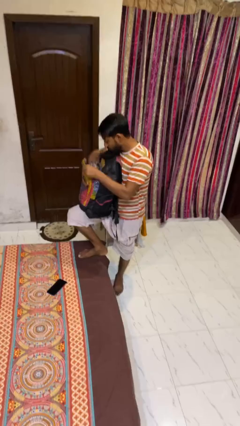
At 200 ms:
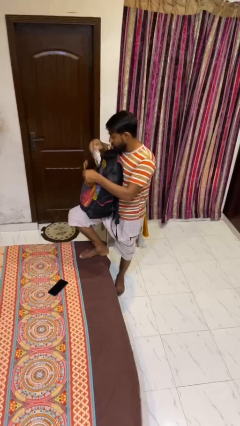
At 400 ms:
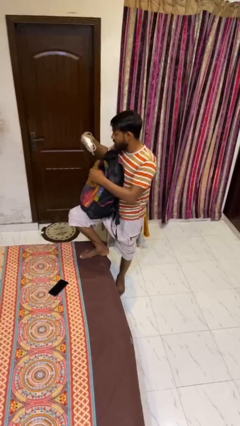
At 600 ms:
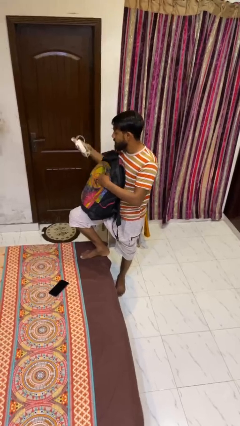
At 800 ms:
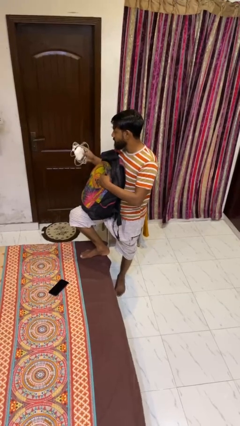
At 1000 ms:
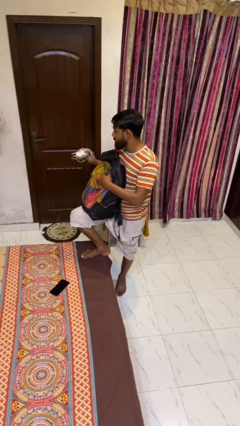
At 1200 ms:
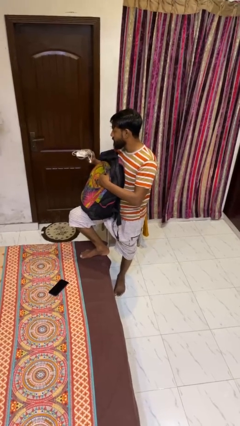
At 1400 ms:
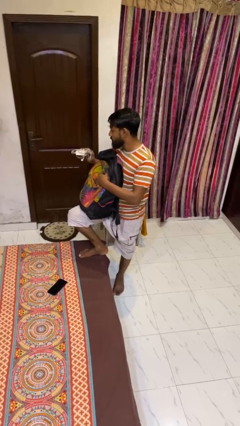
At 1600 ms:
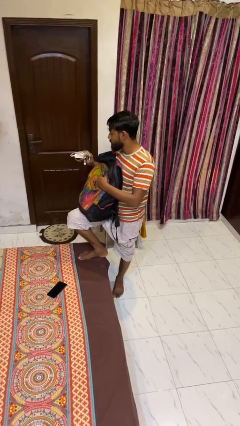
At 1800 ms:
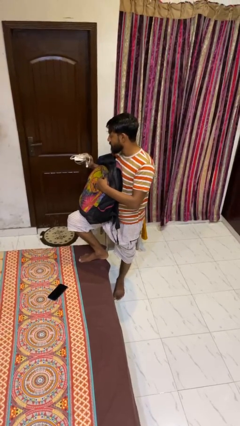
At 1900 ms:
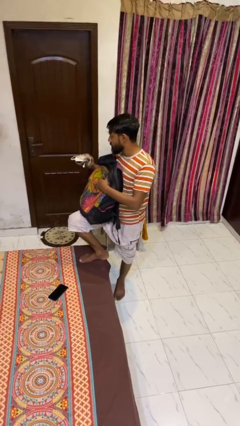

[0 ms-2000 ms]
person takes object from backpack

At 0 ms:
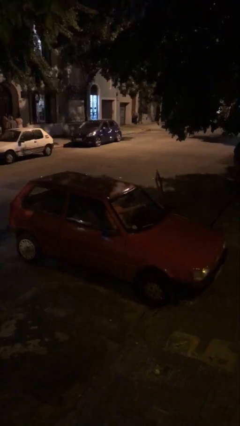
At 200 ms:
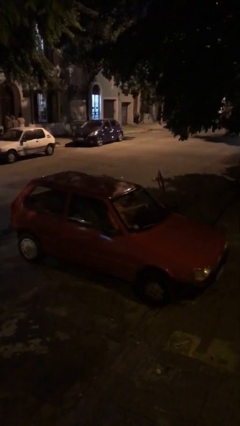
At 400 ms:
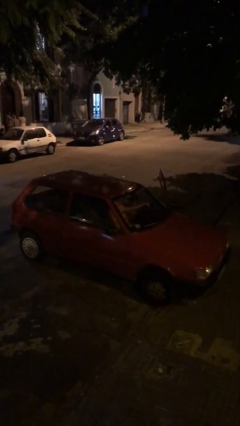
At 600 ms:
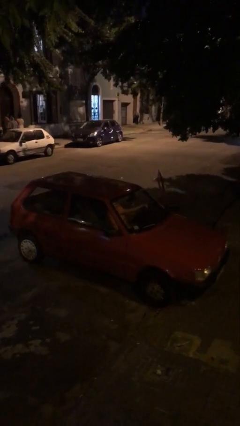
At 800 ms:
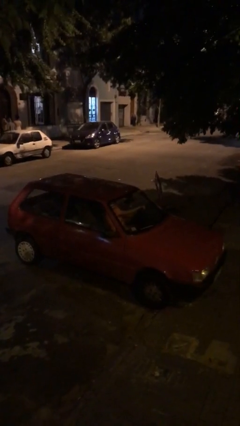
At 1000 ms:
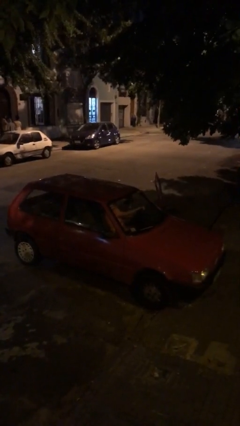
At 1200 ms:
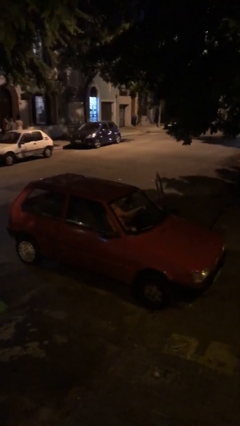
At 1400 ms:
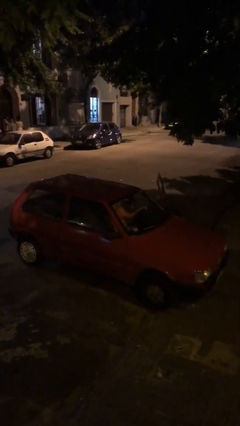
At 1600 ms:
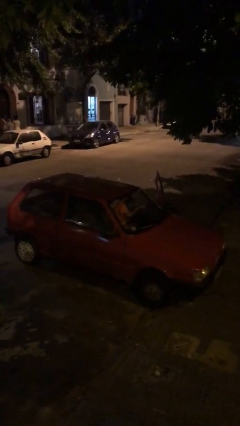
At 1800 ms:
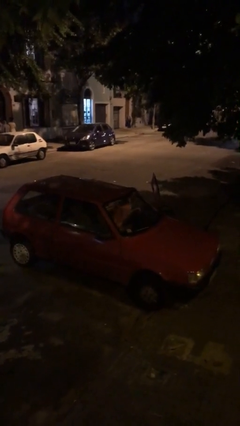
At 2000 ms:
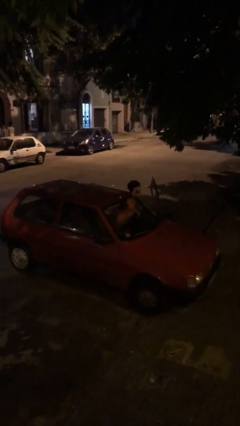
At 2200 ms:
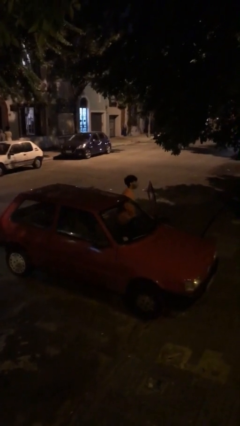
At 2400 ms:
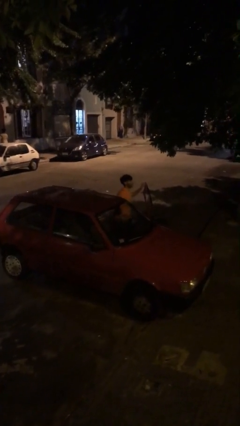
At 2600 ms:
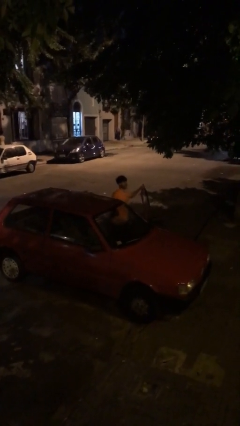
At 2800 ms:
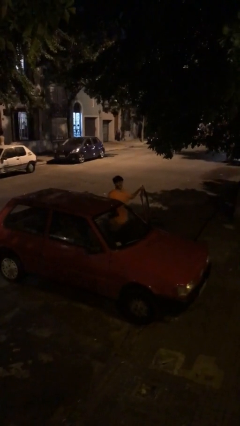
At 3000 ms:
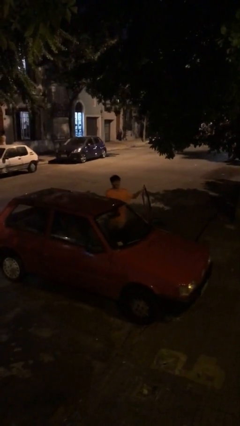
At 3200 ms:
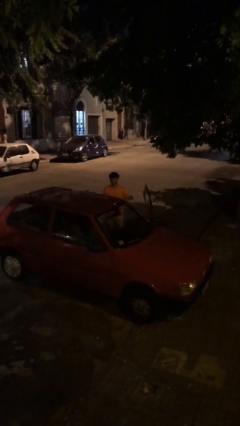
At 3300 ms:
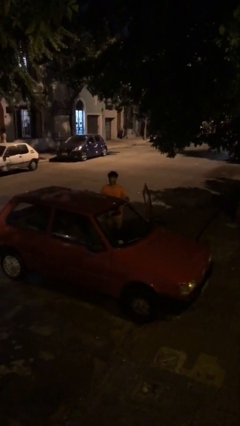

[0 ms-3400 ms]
person exits car

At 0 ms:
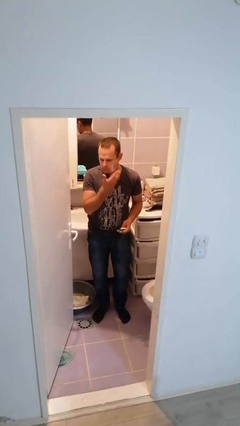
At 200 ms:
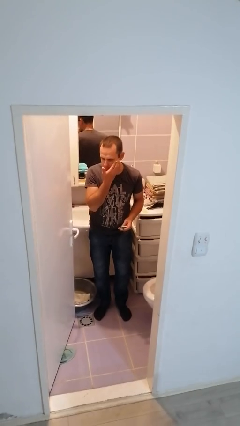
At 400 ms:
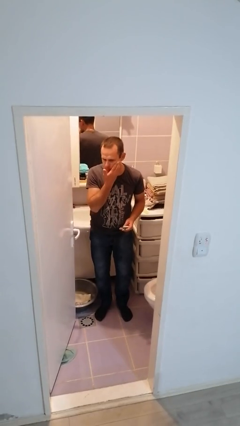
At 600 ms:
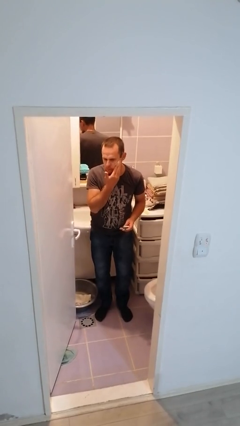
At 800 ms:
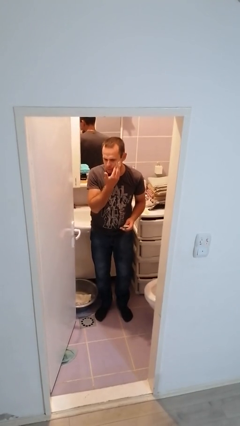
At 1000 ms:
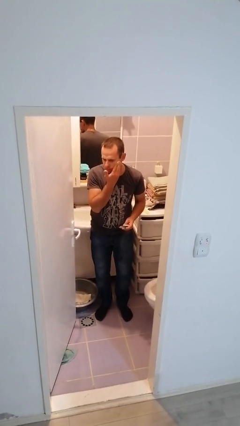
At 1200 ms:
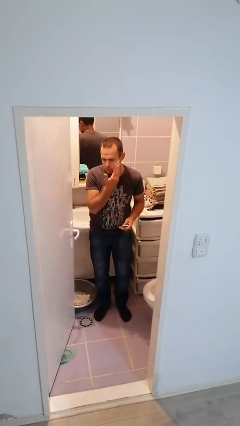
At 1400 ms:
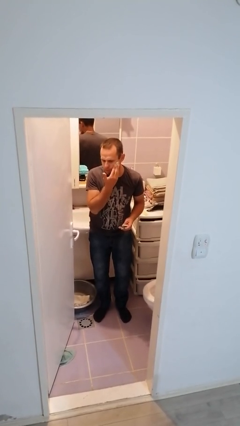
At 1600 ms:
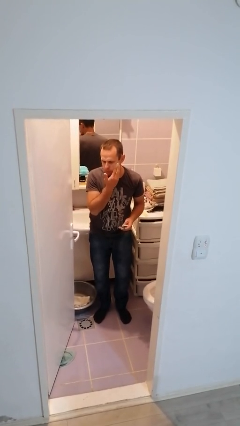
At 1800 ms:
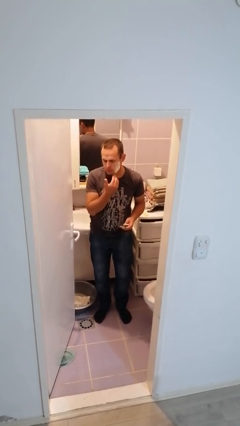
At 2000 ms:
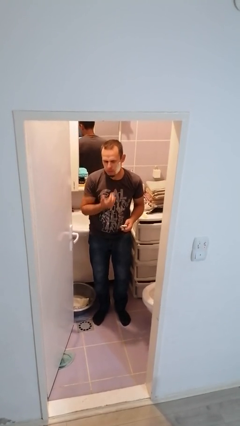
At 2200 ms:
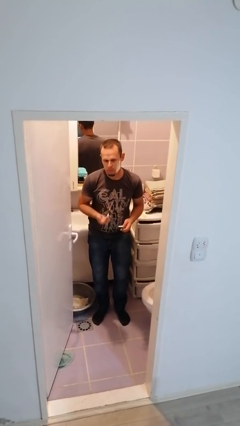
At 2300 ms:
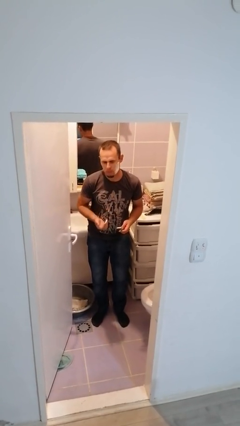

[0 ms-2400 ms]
person applies shaving cream

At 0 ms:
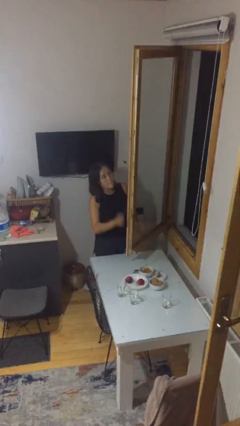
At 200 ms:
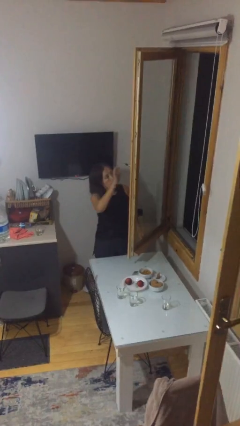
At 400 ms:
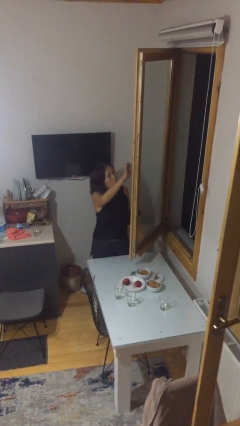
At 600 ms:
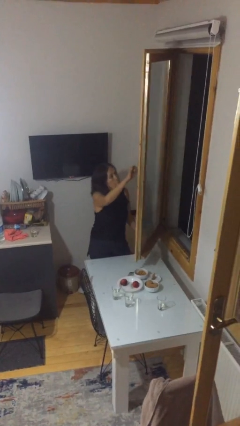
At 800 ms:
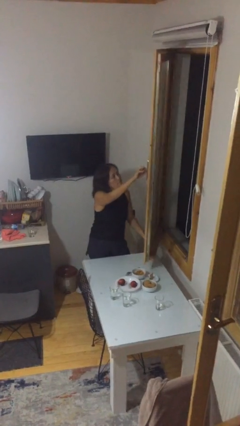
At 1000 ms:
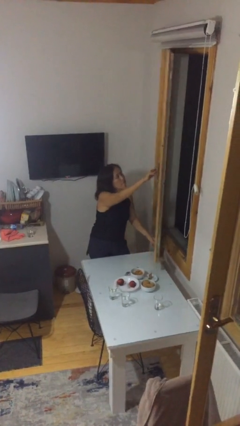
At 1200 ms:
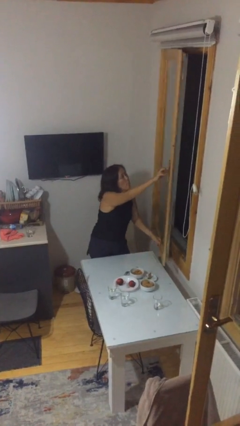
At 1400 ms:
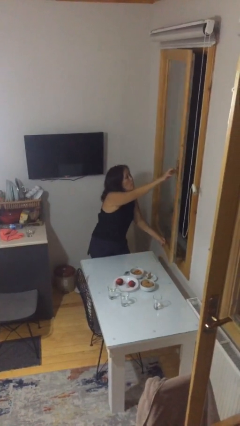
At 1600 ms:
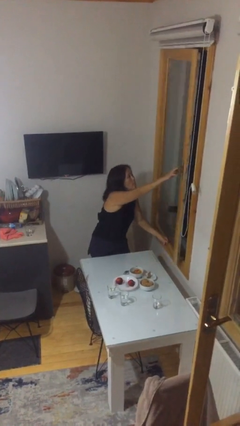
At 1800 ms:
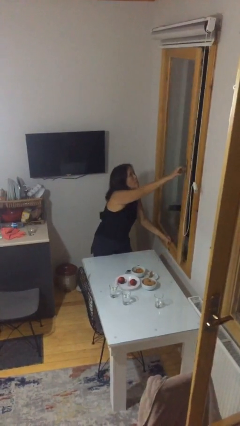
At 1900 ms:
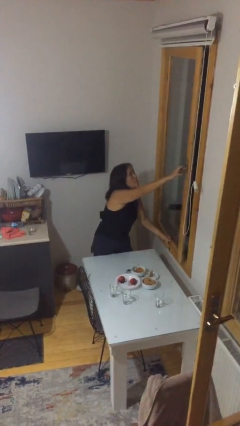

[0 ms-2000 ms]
person closes home window

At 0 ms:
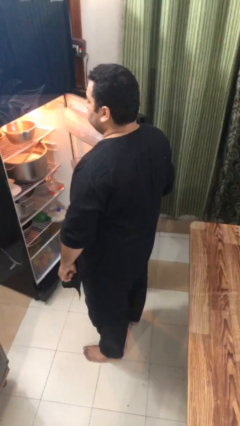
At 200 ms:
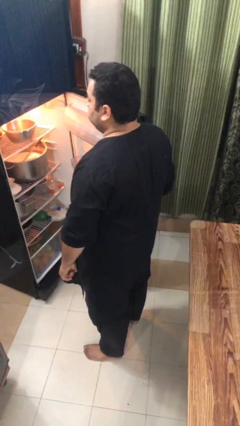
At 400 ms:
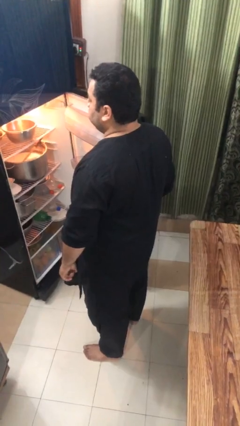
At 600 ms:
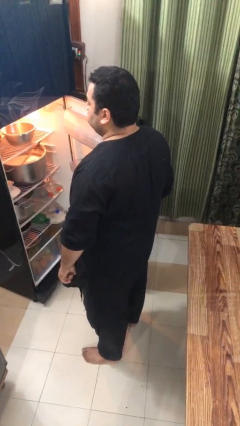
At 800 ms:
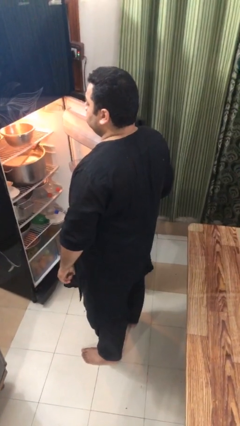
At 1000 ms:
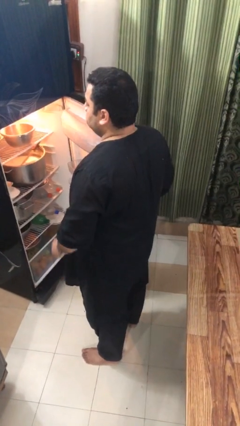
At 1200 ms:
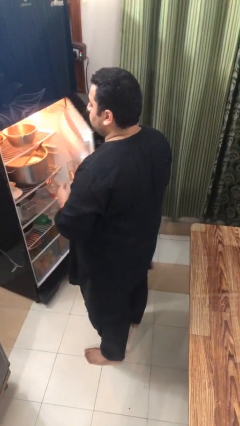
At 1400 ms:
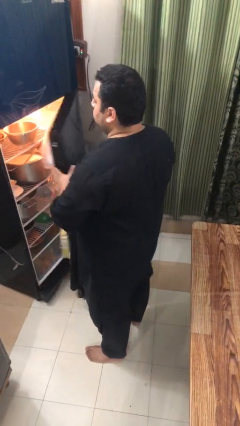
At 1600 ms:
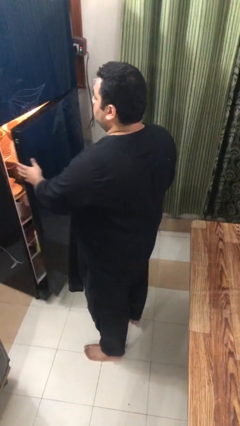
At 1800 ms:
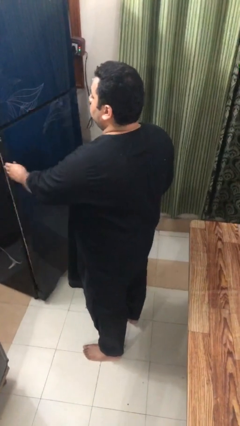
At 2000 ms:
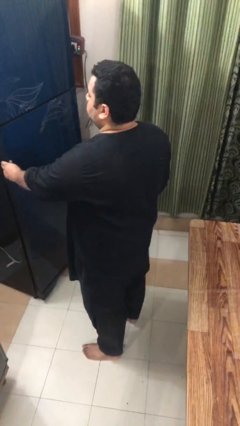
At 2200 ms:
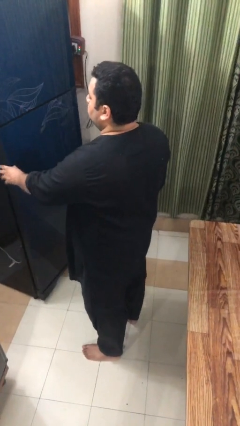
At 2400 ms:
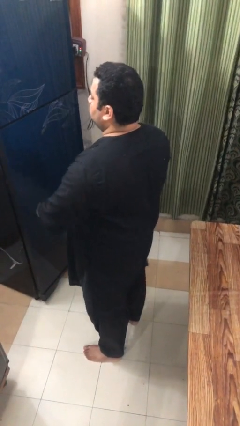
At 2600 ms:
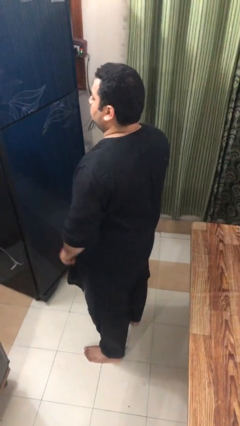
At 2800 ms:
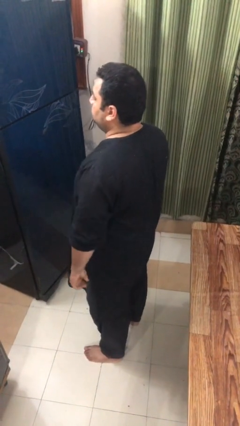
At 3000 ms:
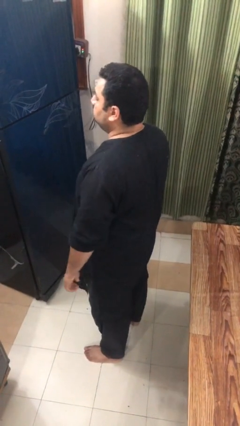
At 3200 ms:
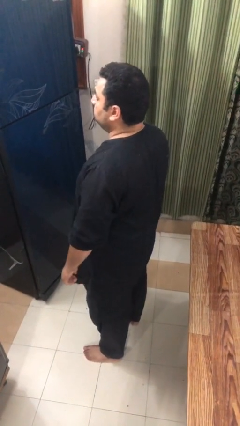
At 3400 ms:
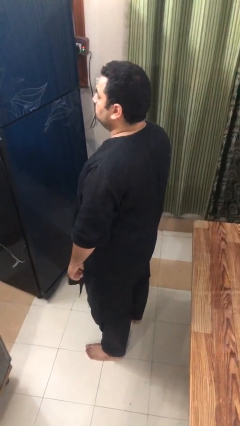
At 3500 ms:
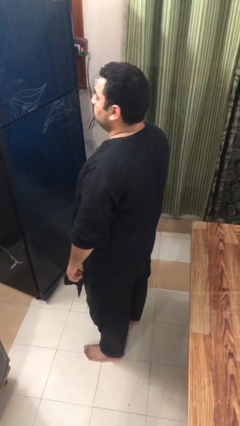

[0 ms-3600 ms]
person closes refrigerator

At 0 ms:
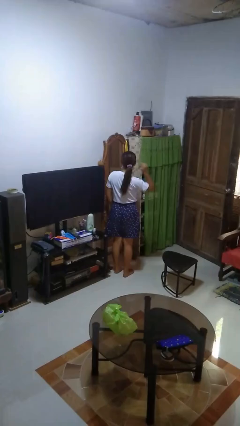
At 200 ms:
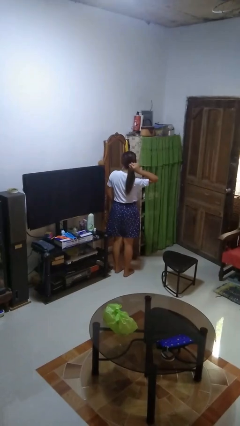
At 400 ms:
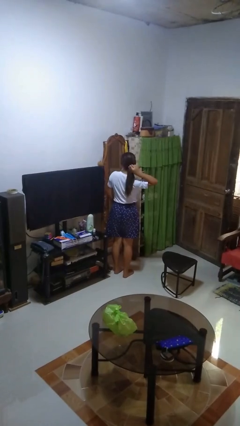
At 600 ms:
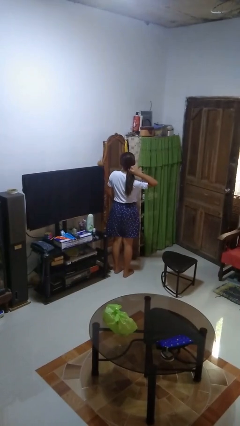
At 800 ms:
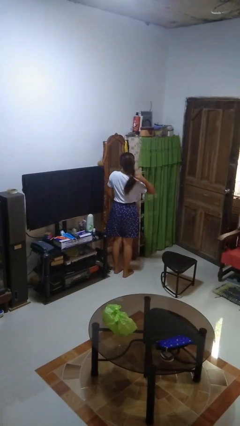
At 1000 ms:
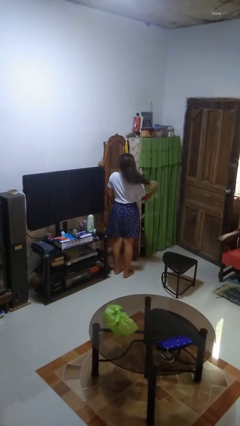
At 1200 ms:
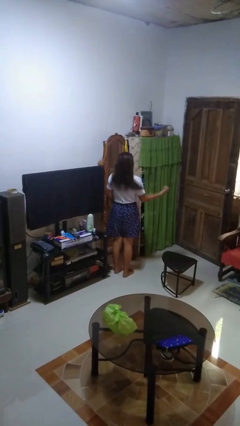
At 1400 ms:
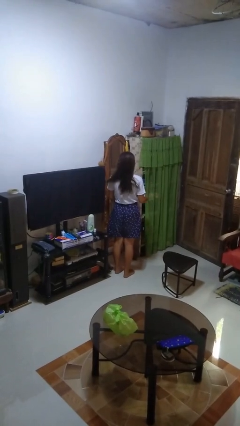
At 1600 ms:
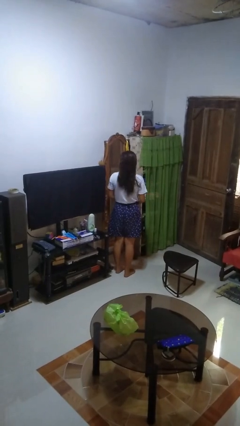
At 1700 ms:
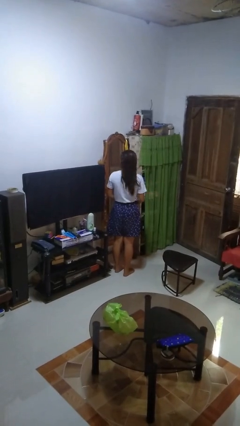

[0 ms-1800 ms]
person takes off hairtie

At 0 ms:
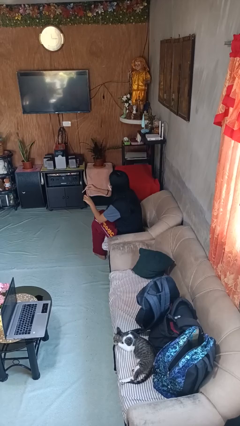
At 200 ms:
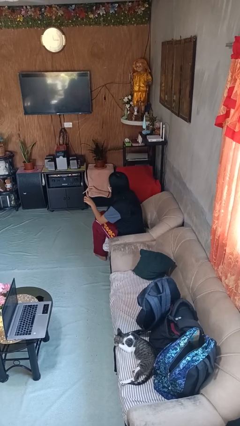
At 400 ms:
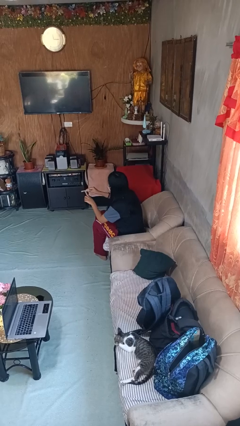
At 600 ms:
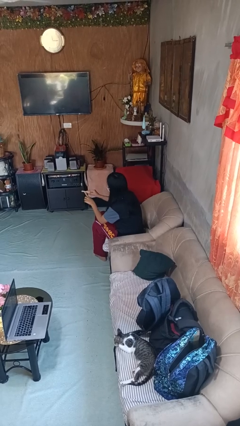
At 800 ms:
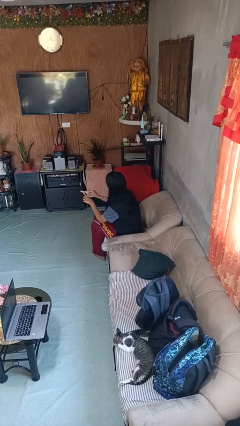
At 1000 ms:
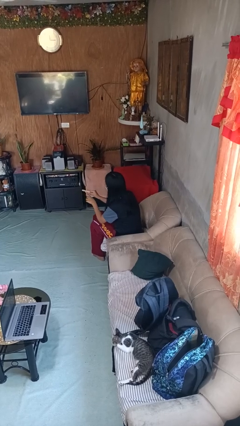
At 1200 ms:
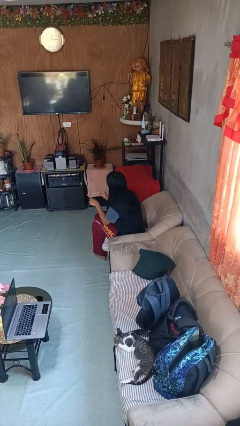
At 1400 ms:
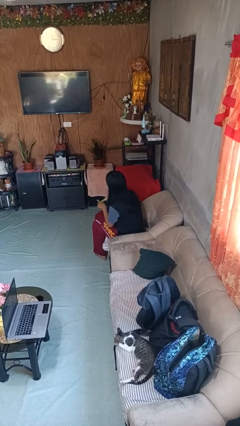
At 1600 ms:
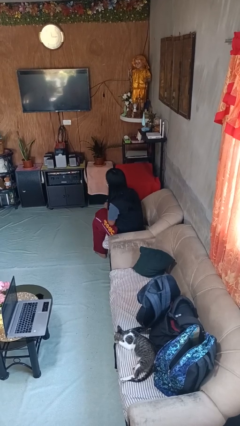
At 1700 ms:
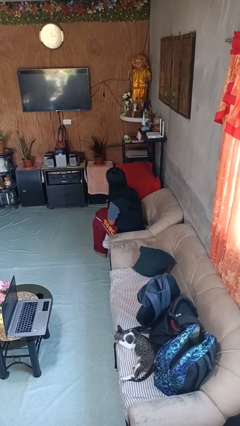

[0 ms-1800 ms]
person files fingernails

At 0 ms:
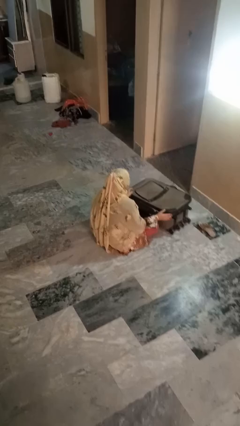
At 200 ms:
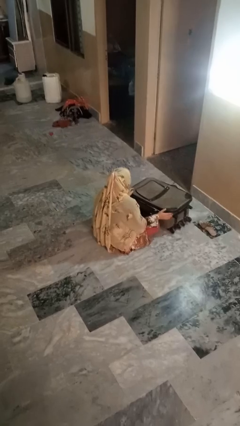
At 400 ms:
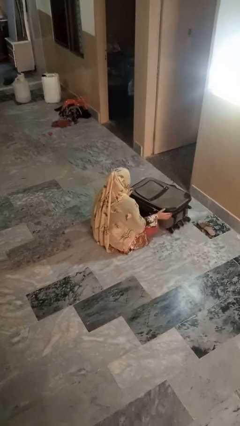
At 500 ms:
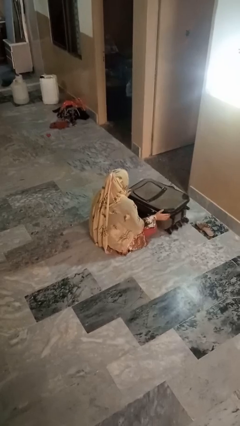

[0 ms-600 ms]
person closes suitcase
